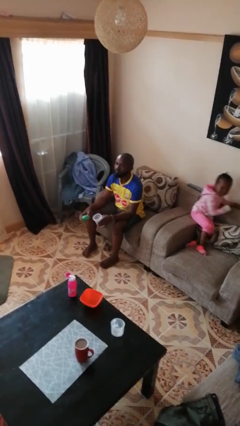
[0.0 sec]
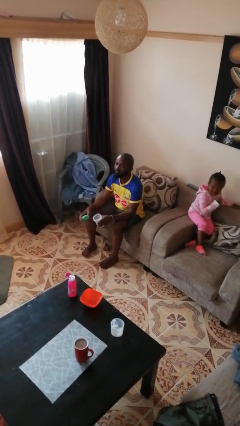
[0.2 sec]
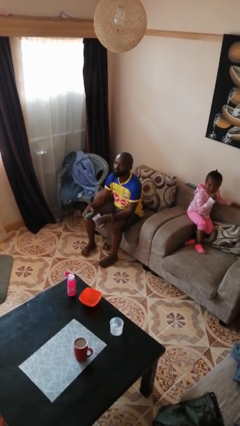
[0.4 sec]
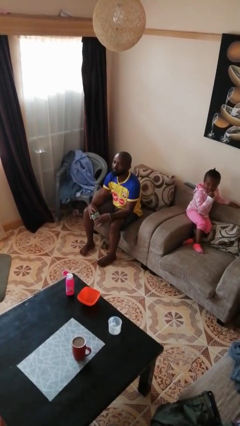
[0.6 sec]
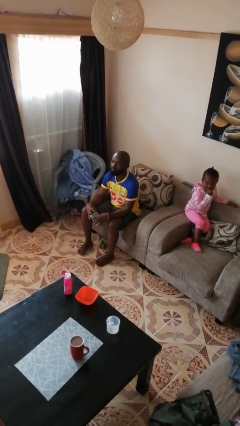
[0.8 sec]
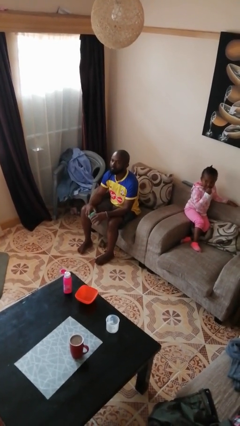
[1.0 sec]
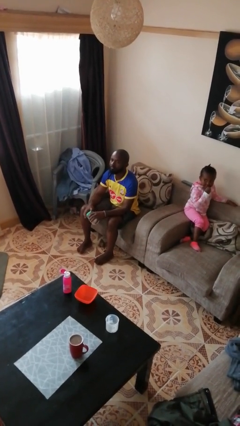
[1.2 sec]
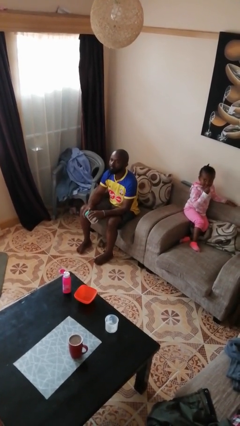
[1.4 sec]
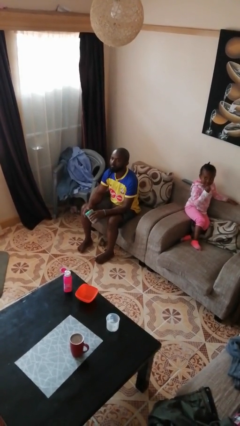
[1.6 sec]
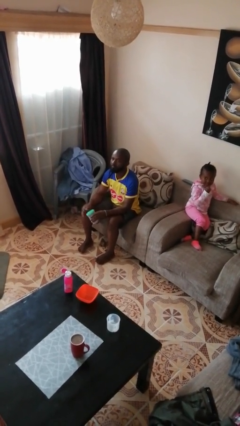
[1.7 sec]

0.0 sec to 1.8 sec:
person closes jar

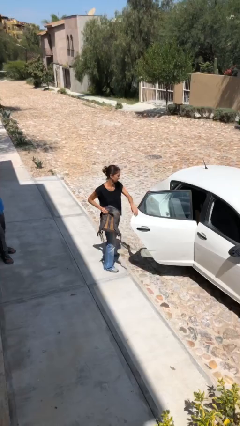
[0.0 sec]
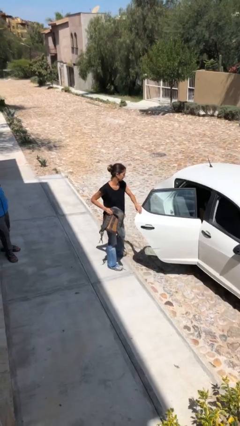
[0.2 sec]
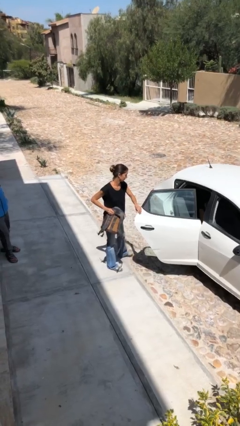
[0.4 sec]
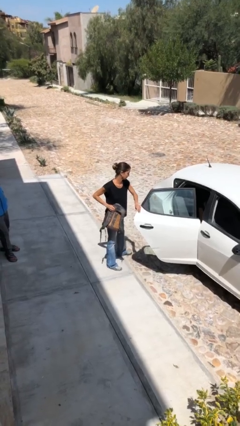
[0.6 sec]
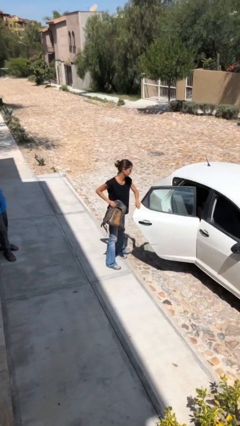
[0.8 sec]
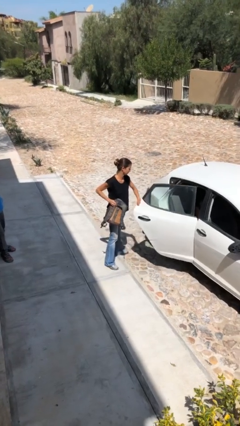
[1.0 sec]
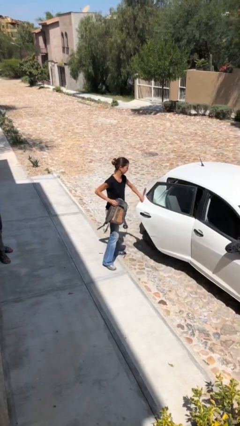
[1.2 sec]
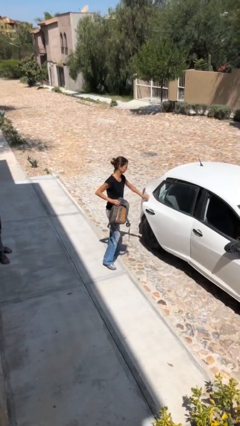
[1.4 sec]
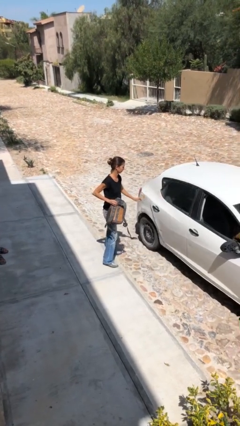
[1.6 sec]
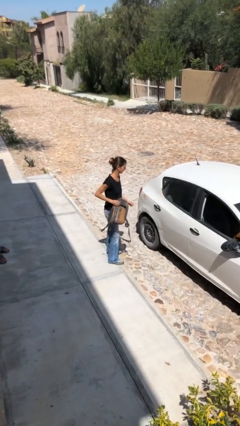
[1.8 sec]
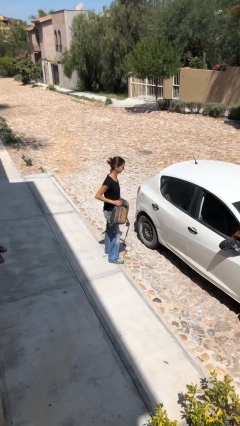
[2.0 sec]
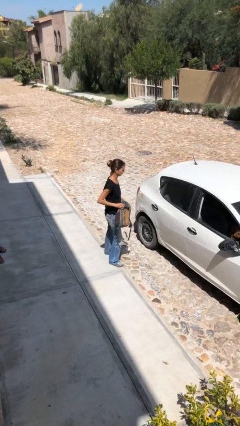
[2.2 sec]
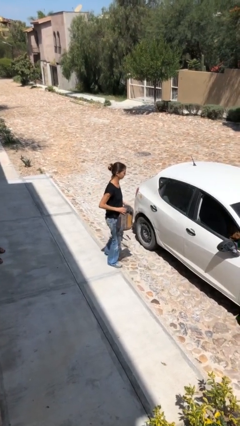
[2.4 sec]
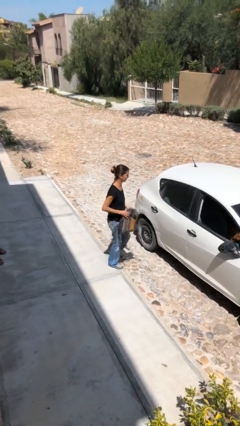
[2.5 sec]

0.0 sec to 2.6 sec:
person closes car door

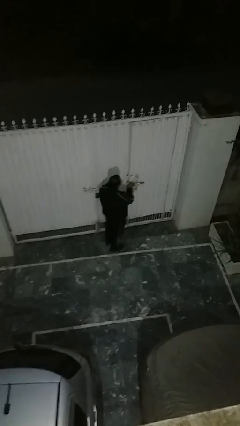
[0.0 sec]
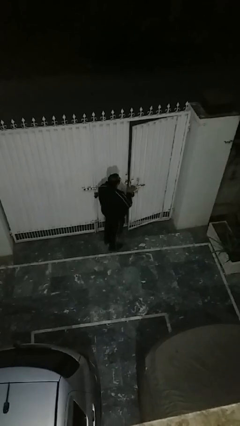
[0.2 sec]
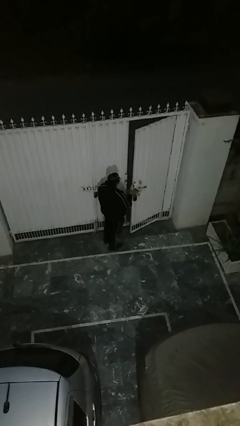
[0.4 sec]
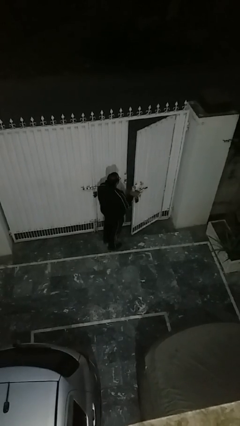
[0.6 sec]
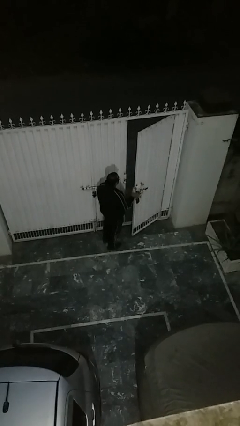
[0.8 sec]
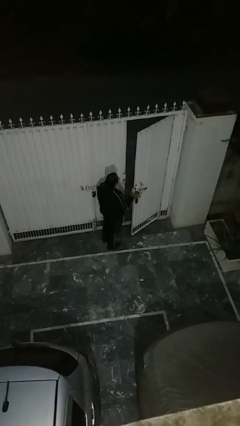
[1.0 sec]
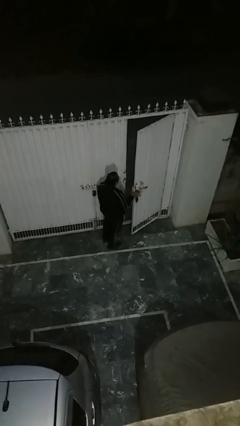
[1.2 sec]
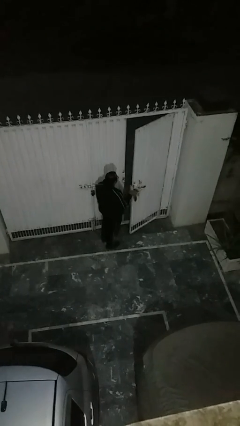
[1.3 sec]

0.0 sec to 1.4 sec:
person opens facility door

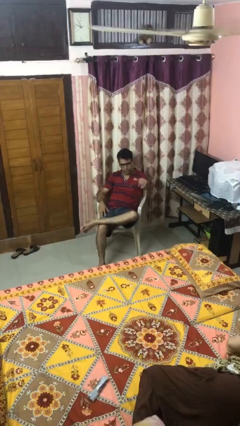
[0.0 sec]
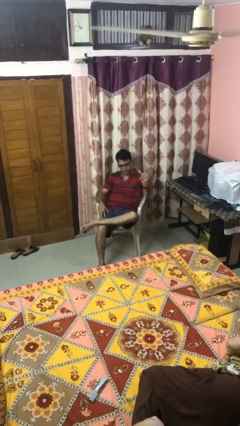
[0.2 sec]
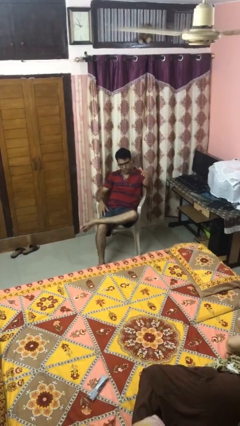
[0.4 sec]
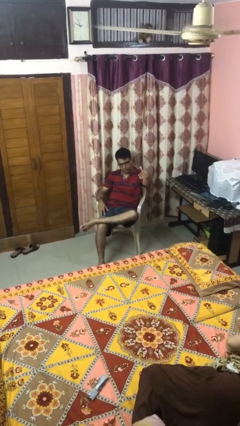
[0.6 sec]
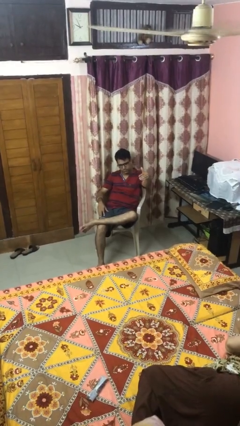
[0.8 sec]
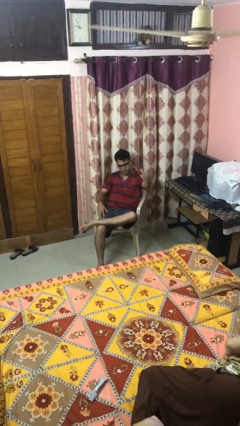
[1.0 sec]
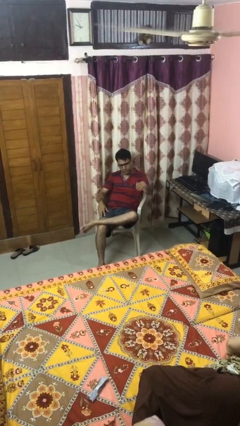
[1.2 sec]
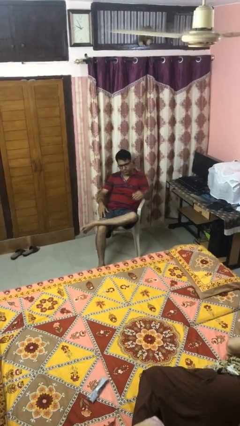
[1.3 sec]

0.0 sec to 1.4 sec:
person gestures come here

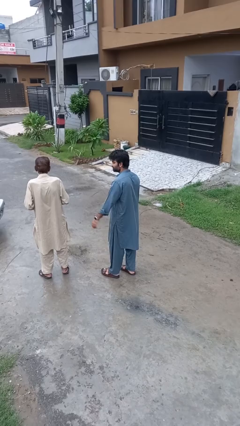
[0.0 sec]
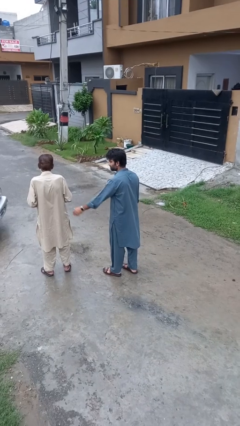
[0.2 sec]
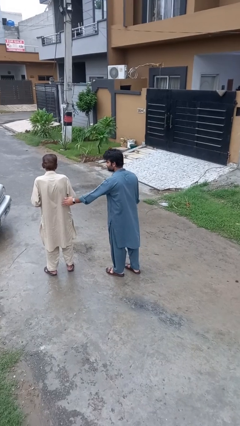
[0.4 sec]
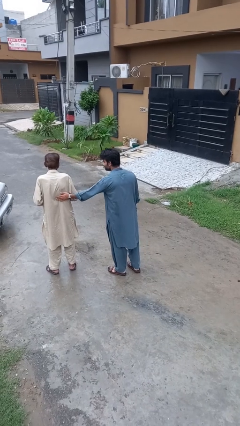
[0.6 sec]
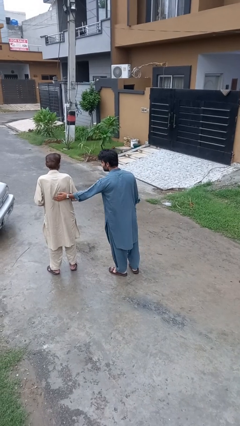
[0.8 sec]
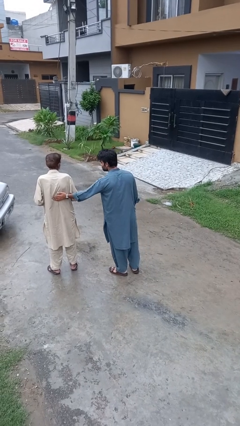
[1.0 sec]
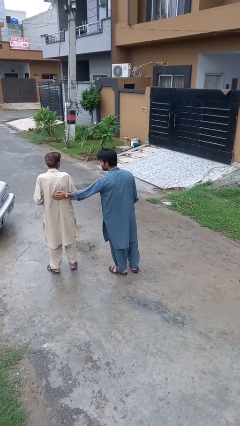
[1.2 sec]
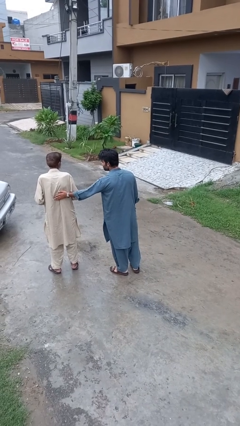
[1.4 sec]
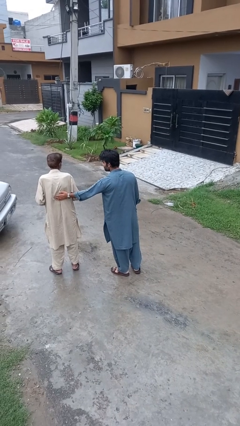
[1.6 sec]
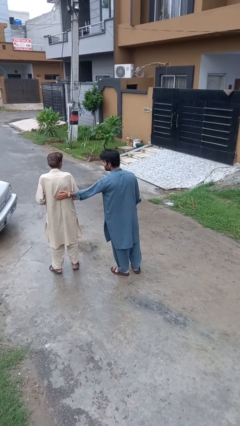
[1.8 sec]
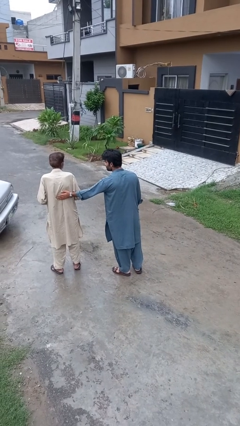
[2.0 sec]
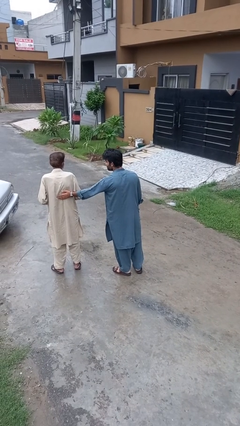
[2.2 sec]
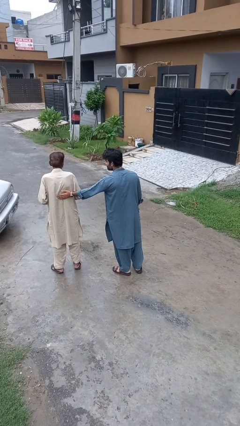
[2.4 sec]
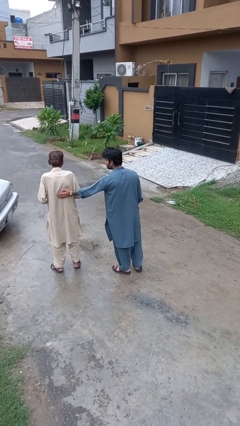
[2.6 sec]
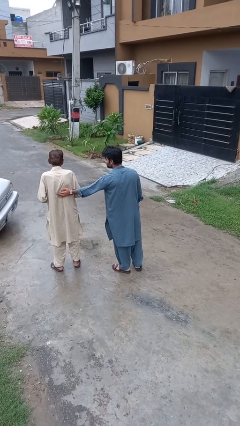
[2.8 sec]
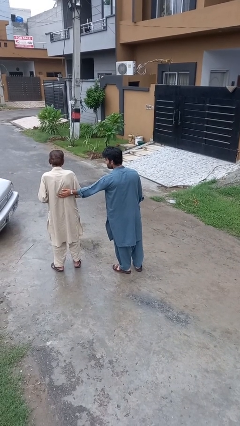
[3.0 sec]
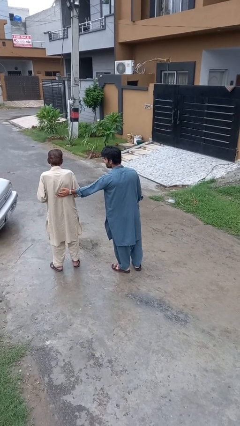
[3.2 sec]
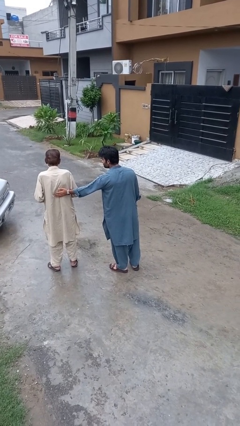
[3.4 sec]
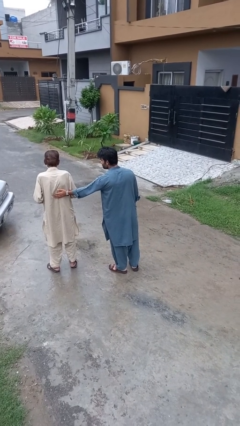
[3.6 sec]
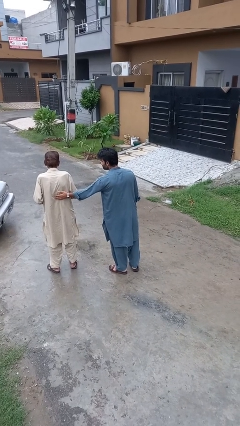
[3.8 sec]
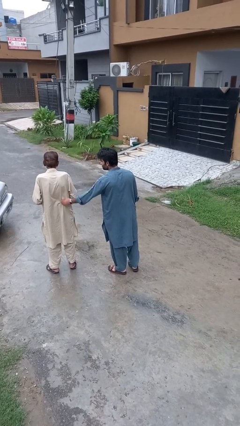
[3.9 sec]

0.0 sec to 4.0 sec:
person touches back of person

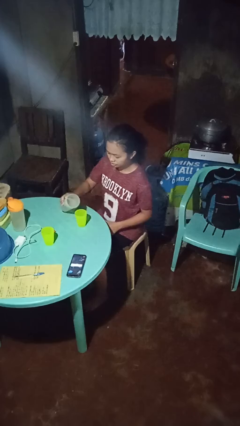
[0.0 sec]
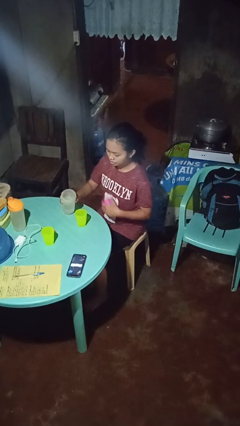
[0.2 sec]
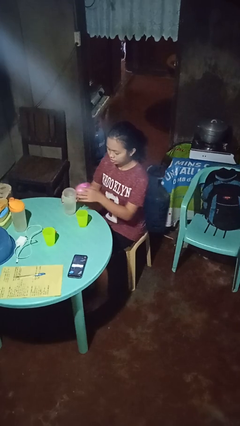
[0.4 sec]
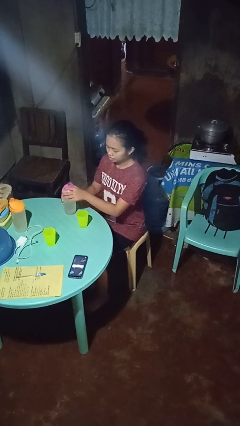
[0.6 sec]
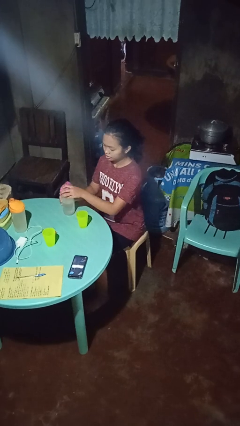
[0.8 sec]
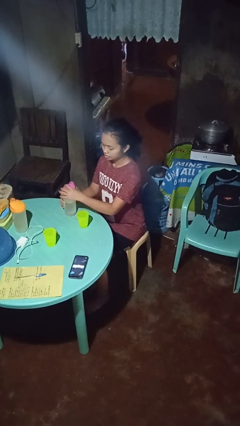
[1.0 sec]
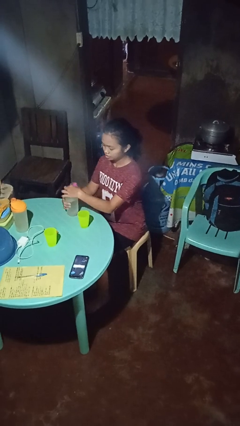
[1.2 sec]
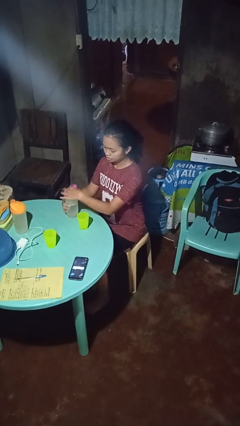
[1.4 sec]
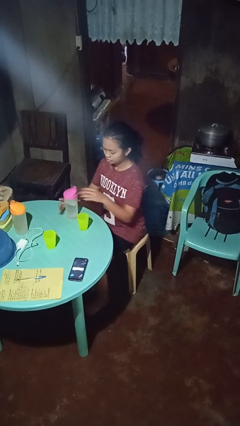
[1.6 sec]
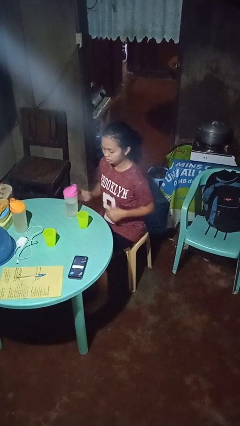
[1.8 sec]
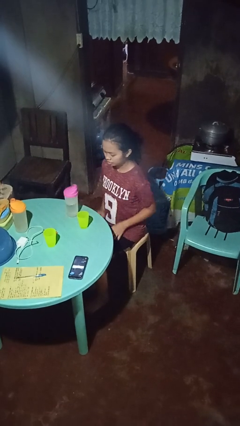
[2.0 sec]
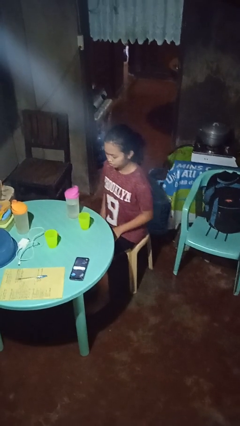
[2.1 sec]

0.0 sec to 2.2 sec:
person screws lid to bottle

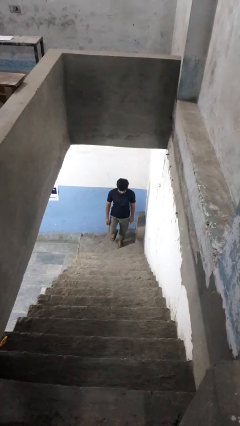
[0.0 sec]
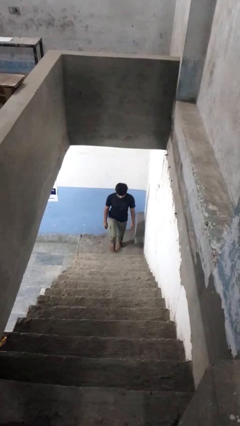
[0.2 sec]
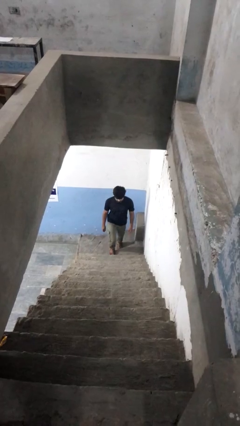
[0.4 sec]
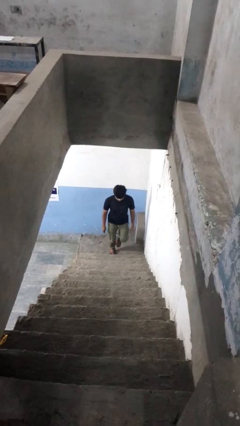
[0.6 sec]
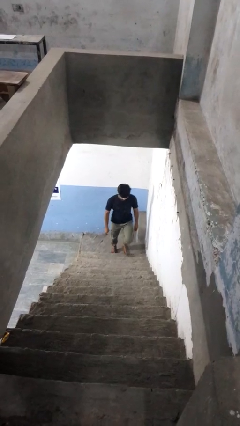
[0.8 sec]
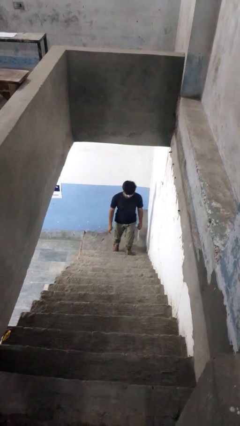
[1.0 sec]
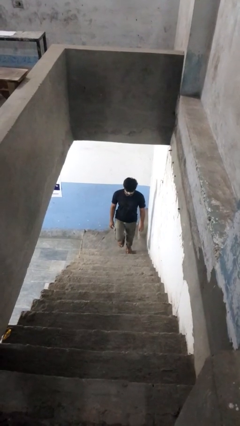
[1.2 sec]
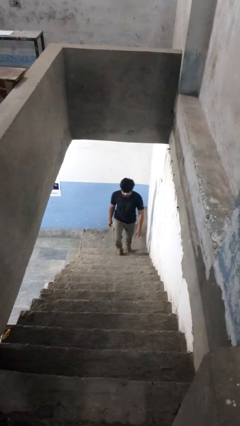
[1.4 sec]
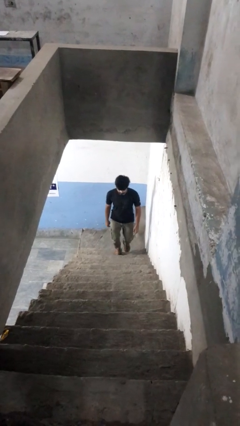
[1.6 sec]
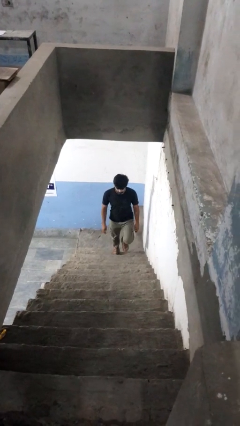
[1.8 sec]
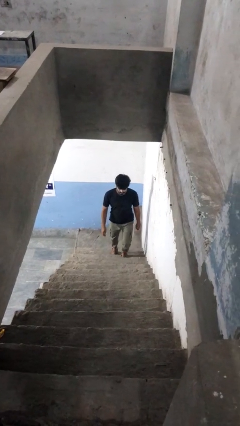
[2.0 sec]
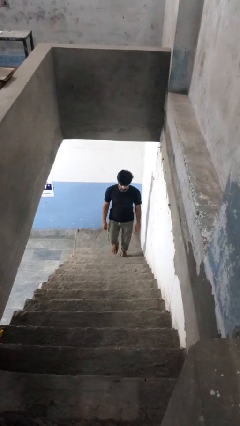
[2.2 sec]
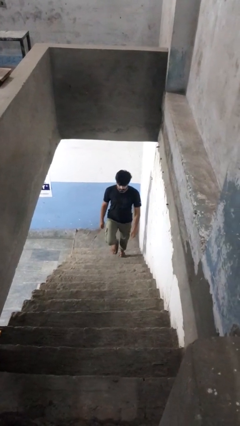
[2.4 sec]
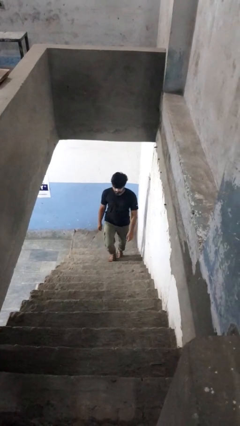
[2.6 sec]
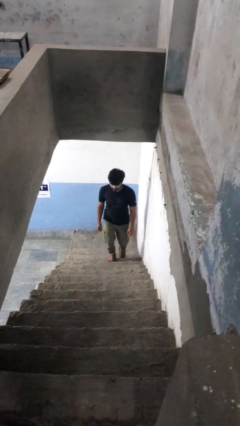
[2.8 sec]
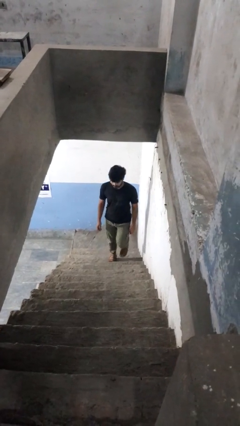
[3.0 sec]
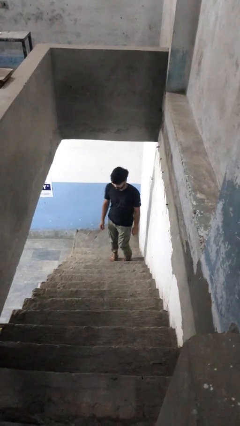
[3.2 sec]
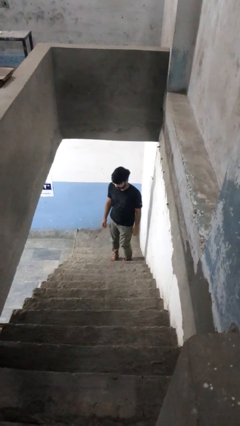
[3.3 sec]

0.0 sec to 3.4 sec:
person climbs up stairs

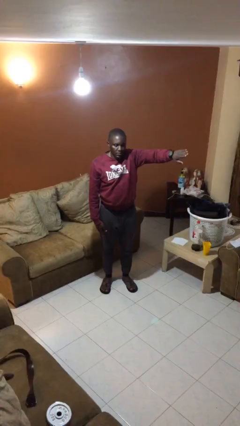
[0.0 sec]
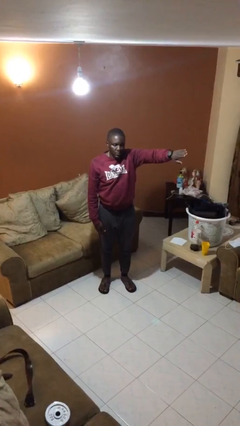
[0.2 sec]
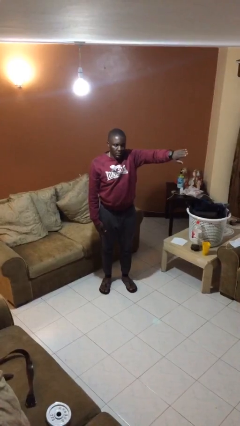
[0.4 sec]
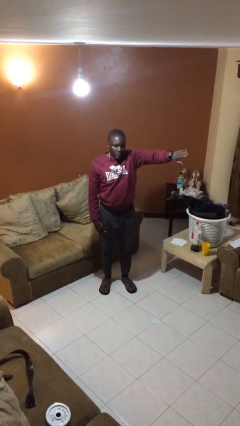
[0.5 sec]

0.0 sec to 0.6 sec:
person gestures swipe right
